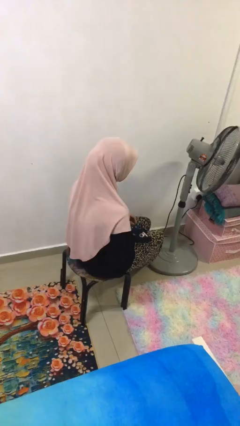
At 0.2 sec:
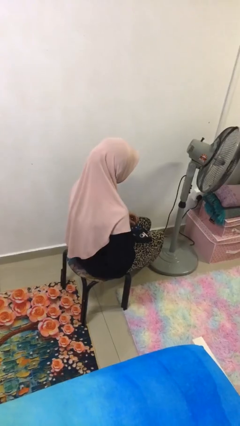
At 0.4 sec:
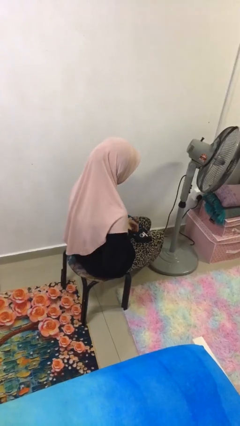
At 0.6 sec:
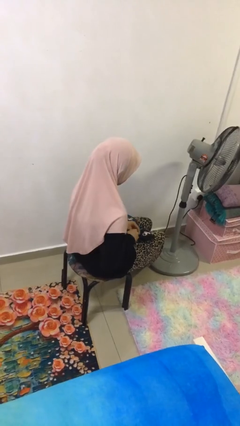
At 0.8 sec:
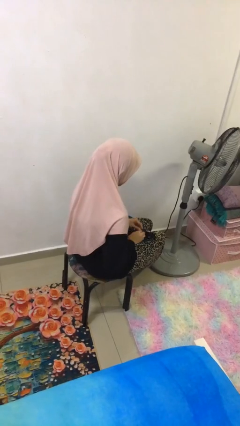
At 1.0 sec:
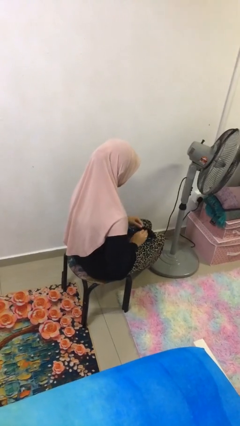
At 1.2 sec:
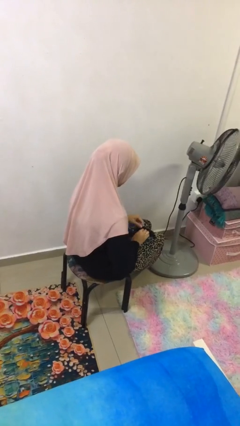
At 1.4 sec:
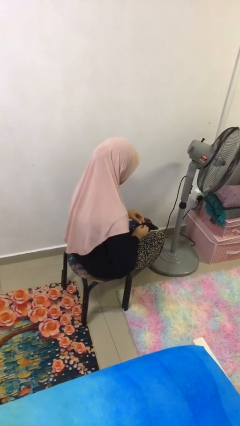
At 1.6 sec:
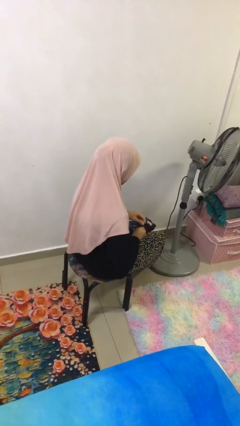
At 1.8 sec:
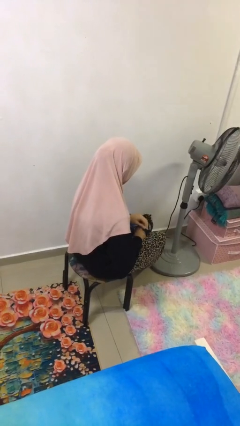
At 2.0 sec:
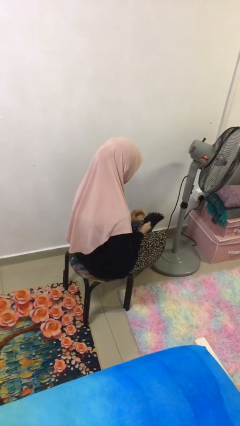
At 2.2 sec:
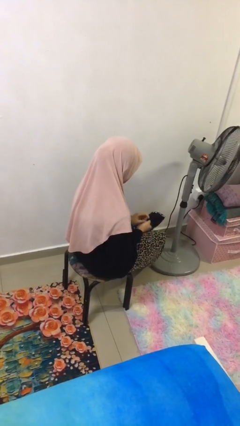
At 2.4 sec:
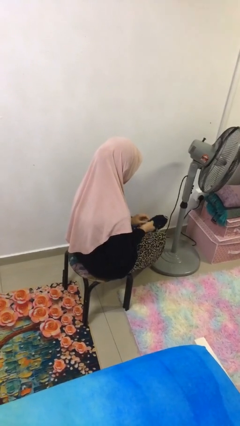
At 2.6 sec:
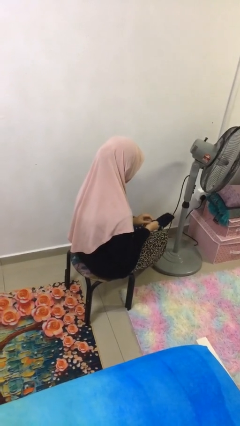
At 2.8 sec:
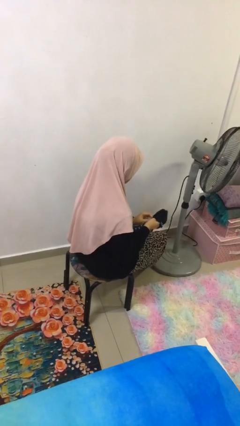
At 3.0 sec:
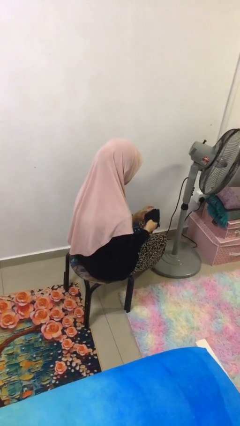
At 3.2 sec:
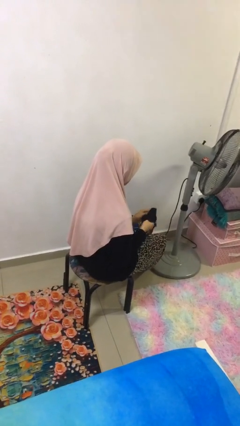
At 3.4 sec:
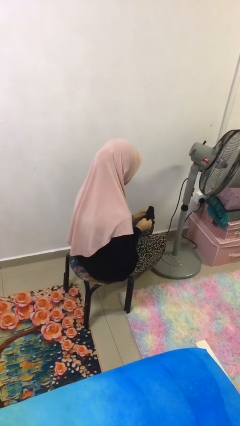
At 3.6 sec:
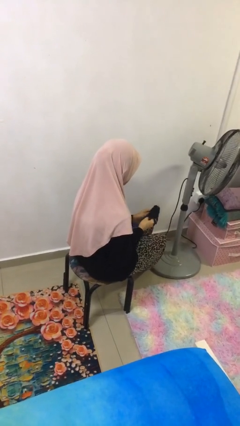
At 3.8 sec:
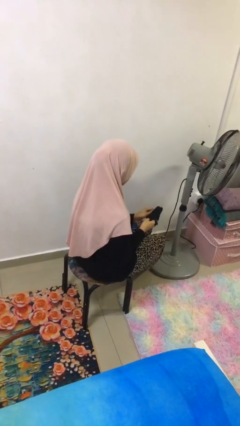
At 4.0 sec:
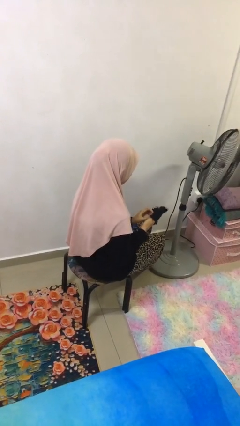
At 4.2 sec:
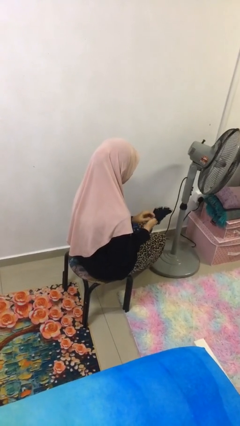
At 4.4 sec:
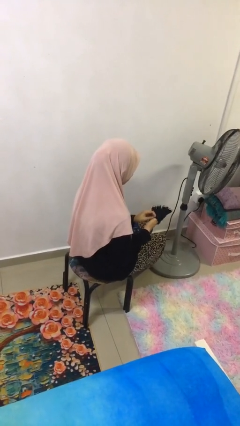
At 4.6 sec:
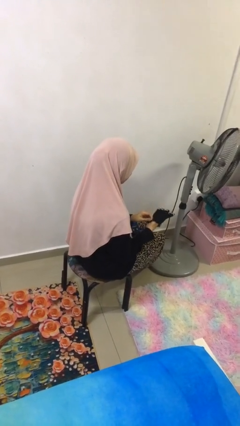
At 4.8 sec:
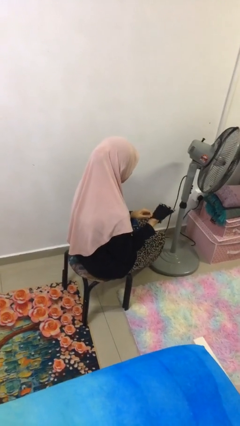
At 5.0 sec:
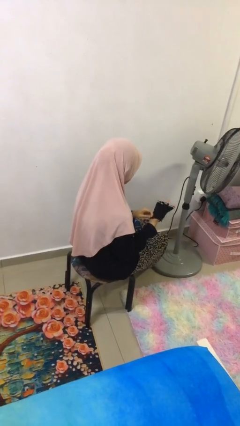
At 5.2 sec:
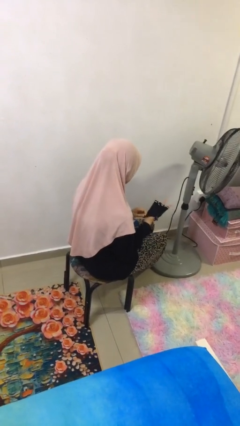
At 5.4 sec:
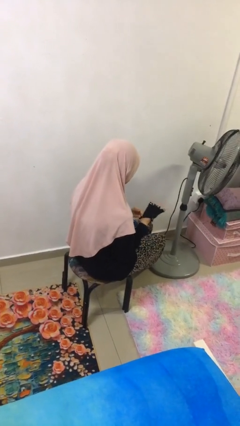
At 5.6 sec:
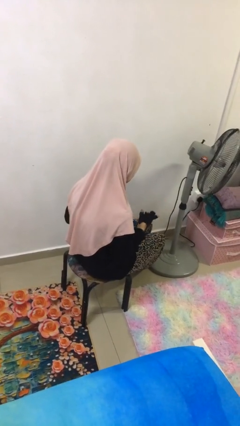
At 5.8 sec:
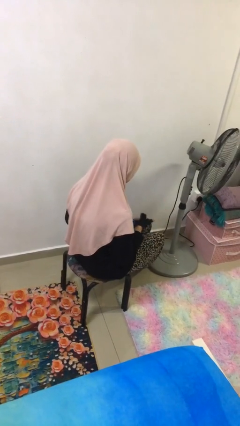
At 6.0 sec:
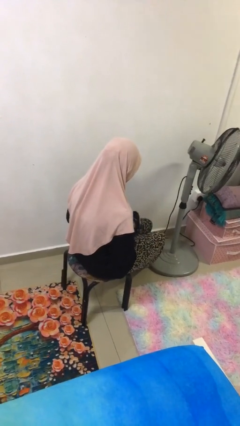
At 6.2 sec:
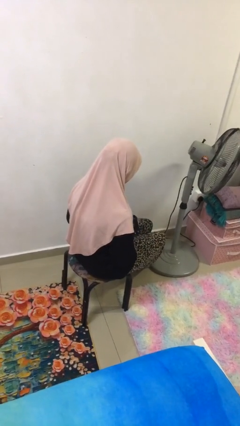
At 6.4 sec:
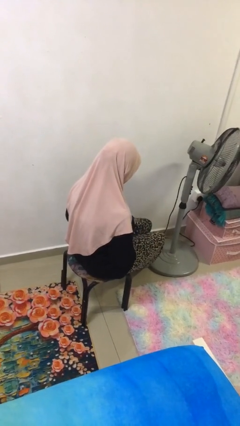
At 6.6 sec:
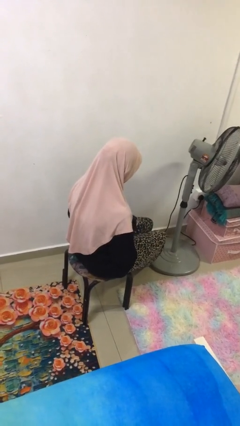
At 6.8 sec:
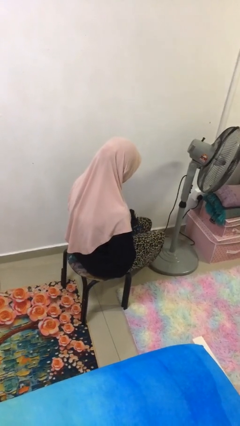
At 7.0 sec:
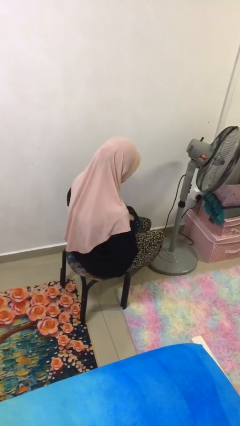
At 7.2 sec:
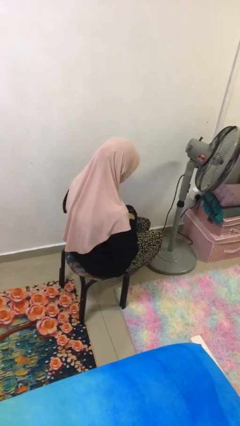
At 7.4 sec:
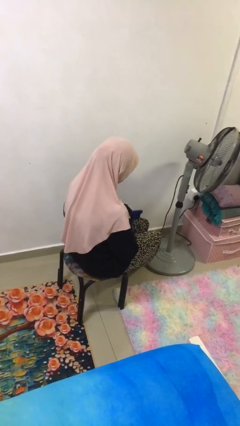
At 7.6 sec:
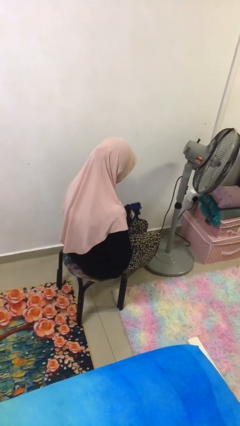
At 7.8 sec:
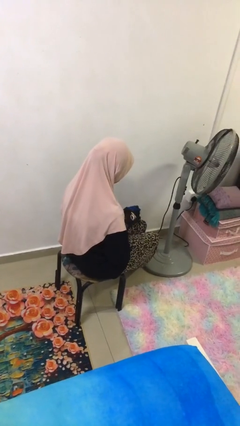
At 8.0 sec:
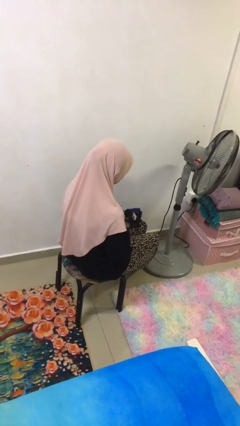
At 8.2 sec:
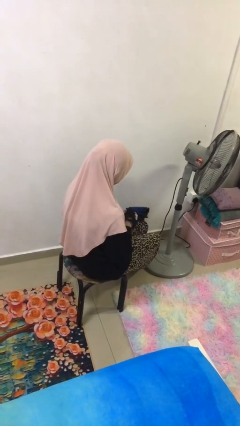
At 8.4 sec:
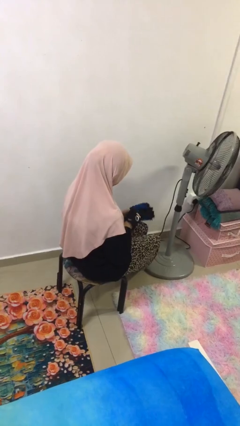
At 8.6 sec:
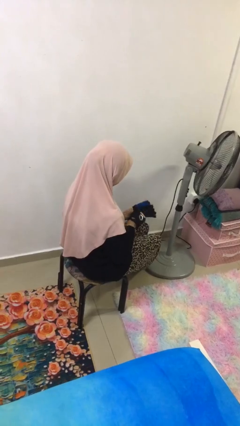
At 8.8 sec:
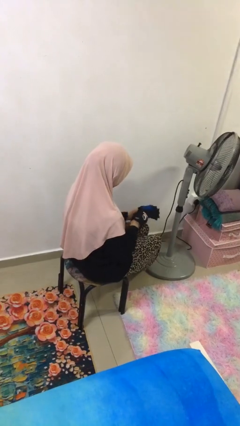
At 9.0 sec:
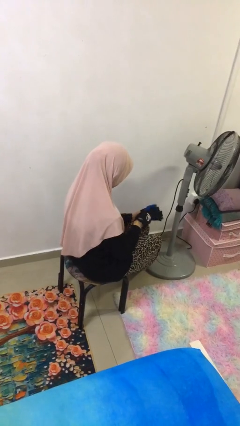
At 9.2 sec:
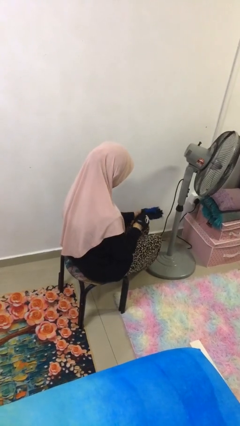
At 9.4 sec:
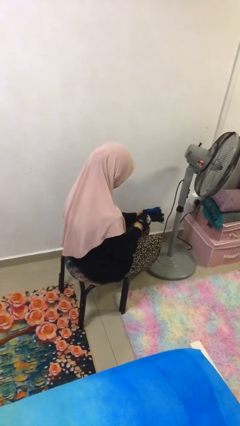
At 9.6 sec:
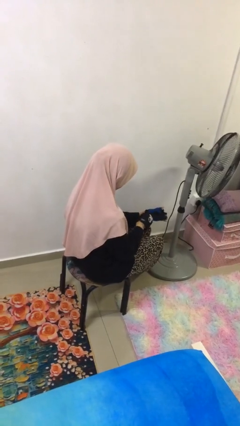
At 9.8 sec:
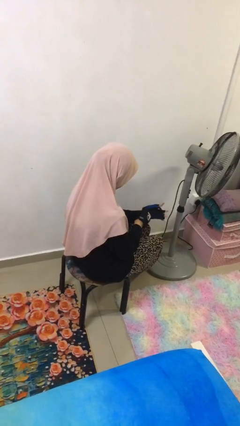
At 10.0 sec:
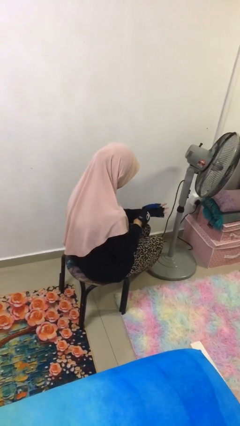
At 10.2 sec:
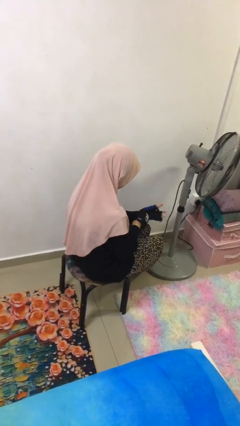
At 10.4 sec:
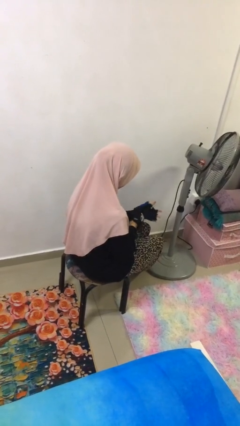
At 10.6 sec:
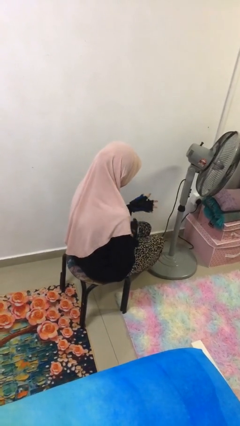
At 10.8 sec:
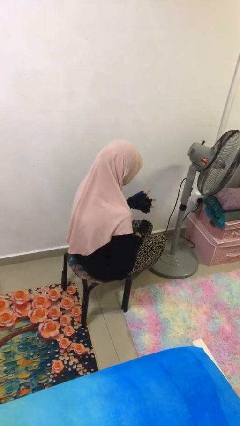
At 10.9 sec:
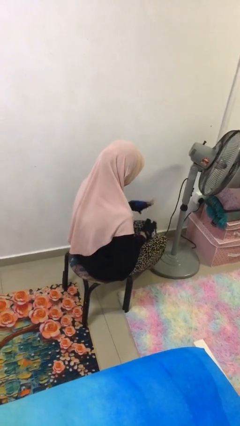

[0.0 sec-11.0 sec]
person puts on gloves

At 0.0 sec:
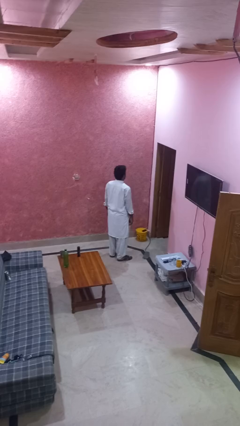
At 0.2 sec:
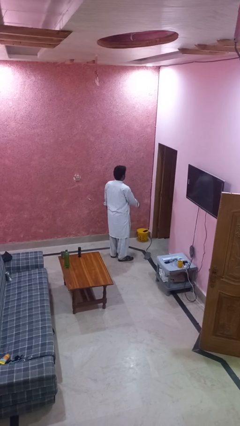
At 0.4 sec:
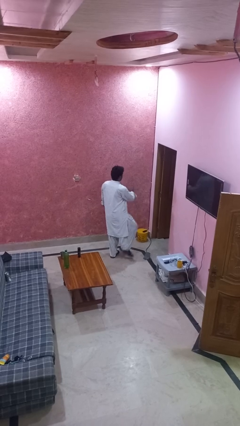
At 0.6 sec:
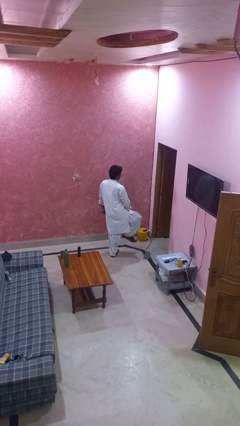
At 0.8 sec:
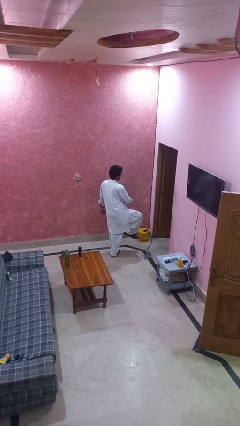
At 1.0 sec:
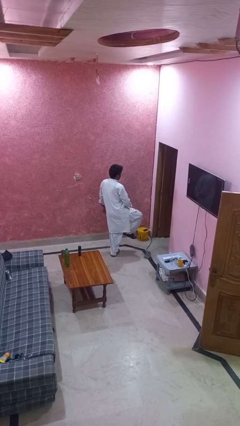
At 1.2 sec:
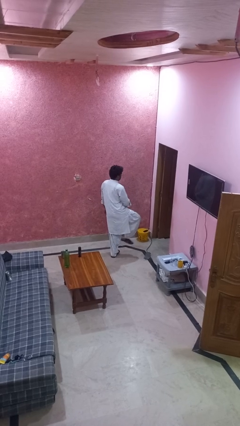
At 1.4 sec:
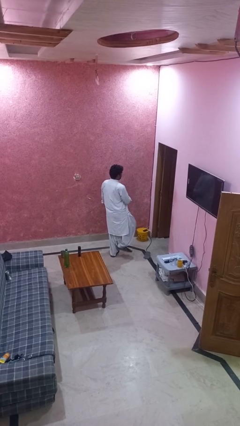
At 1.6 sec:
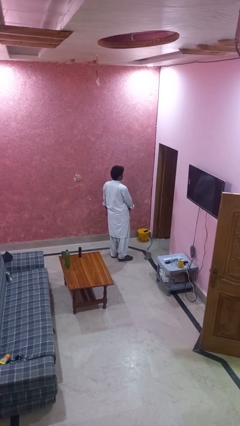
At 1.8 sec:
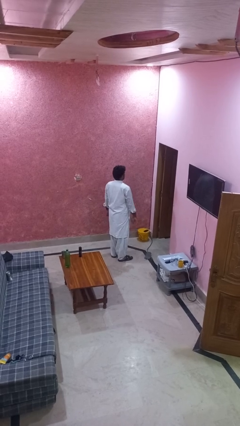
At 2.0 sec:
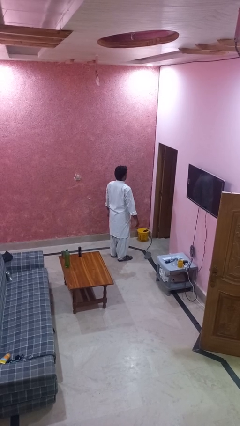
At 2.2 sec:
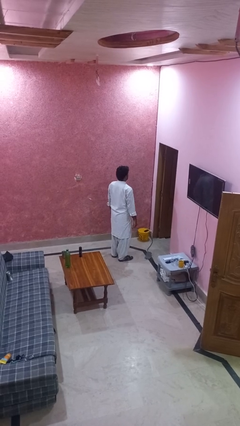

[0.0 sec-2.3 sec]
person slaps hands on thighs

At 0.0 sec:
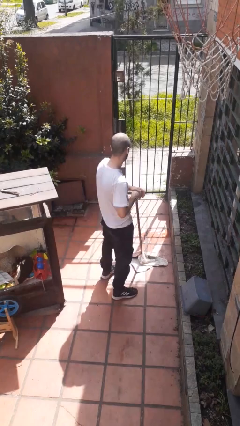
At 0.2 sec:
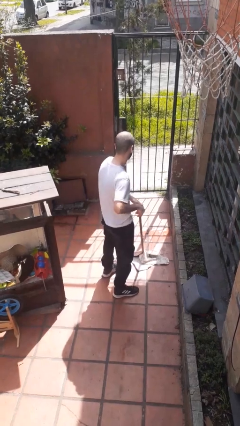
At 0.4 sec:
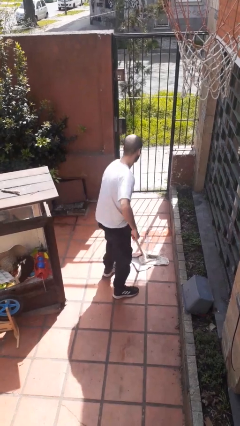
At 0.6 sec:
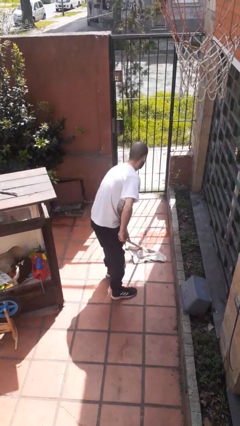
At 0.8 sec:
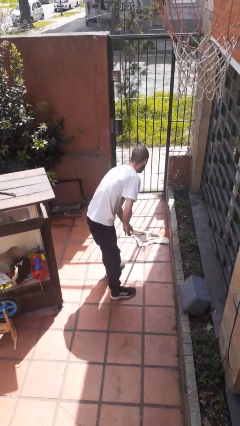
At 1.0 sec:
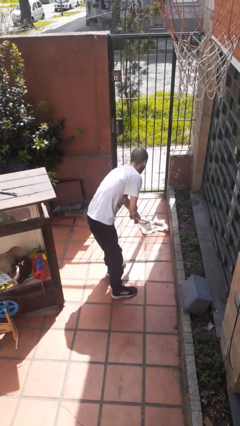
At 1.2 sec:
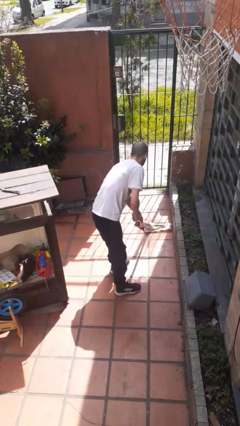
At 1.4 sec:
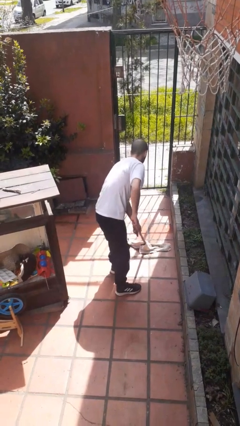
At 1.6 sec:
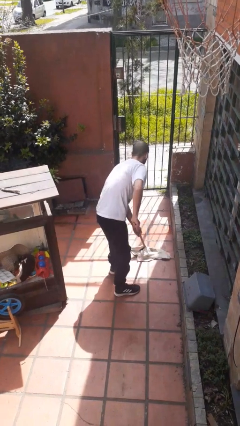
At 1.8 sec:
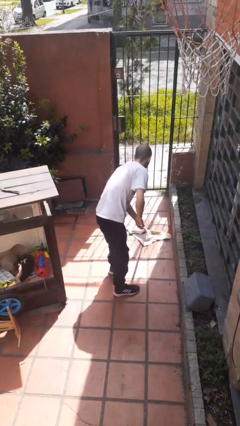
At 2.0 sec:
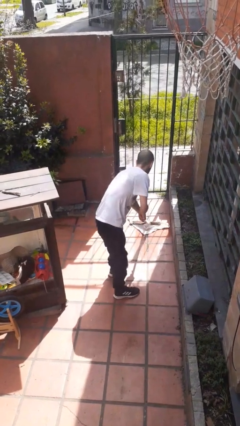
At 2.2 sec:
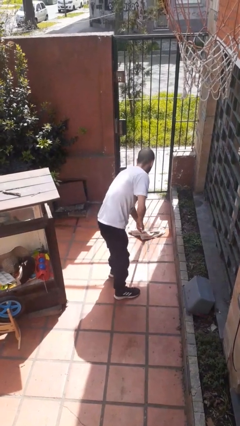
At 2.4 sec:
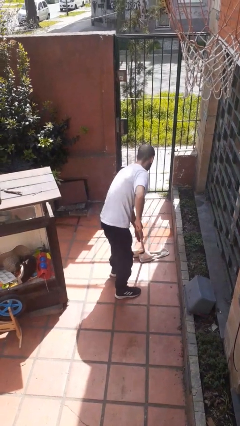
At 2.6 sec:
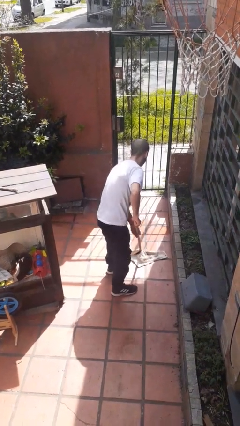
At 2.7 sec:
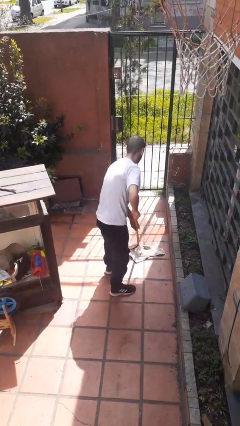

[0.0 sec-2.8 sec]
person mops

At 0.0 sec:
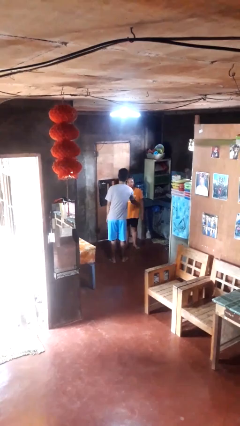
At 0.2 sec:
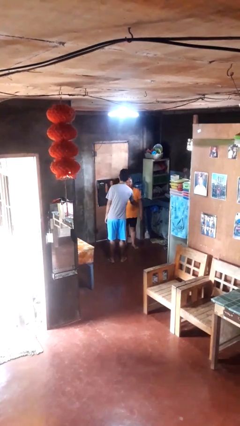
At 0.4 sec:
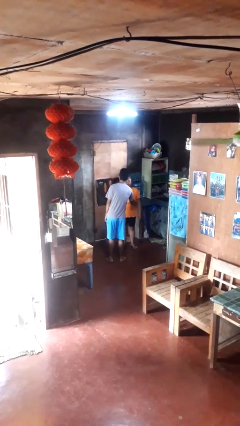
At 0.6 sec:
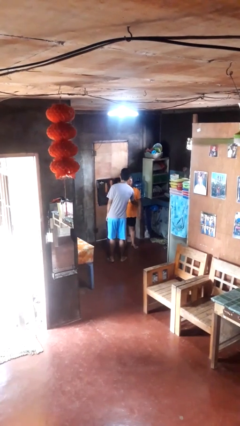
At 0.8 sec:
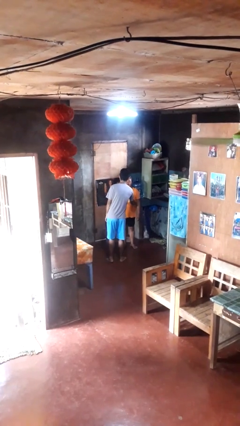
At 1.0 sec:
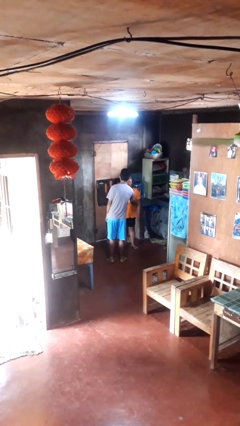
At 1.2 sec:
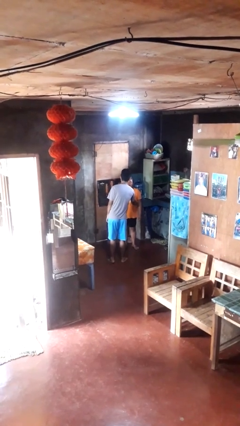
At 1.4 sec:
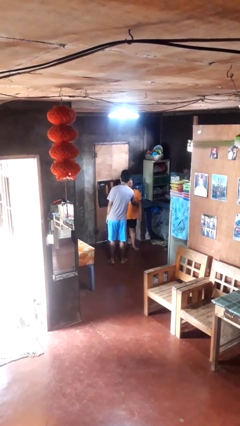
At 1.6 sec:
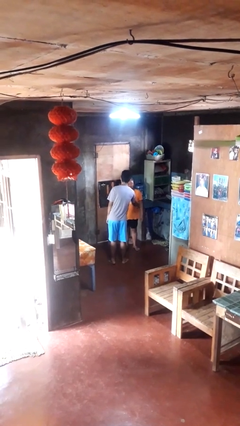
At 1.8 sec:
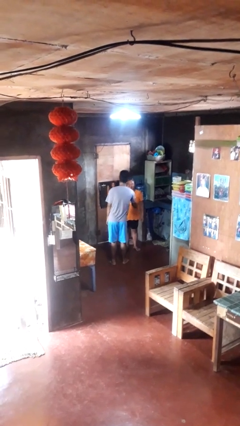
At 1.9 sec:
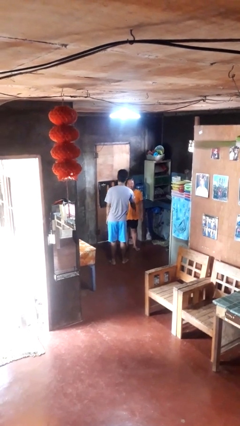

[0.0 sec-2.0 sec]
person tickles person
